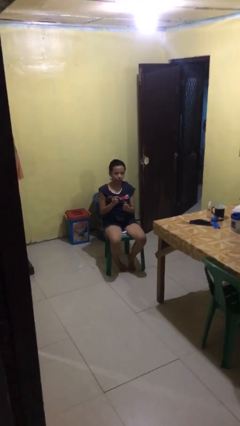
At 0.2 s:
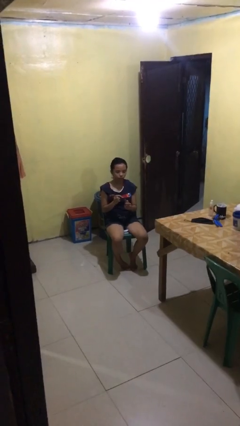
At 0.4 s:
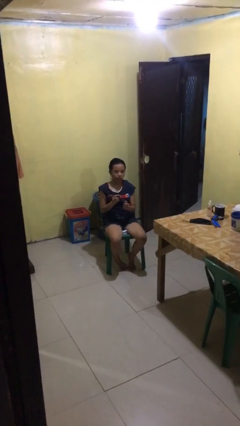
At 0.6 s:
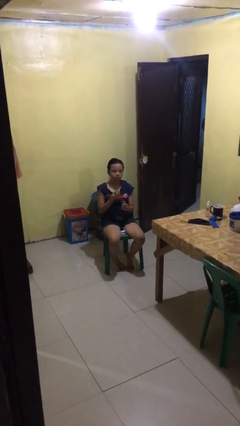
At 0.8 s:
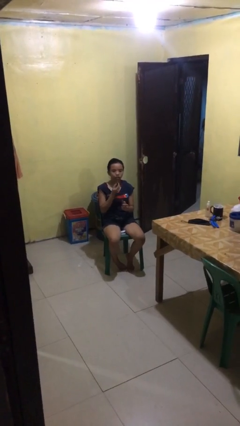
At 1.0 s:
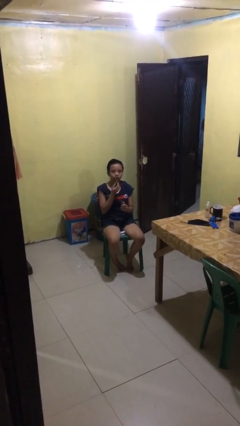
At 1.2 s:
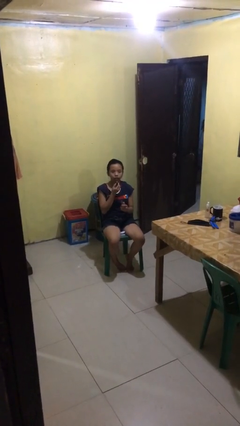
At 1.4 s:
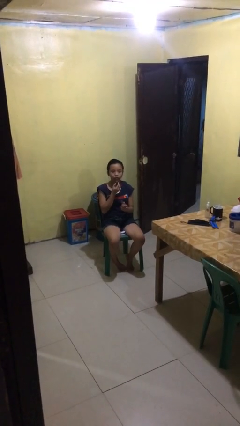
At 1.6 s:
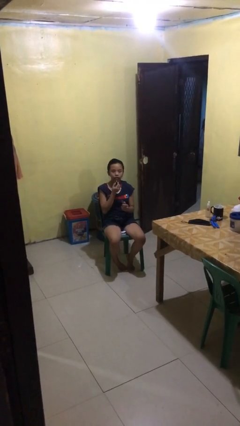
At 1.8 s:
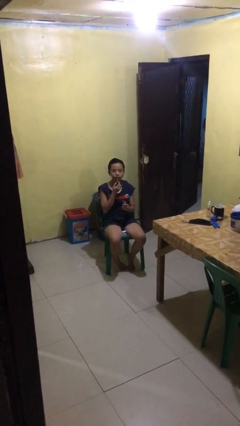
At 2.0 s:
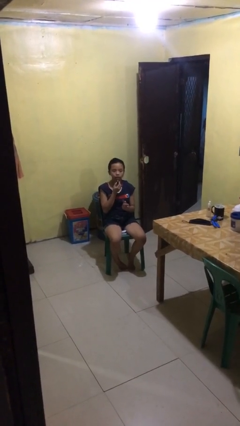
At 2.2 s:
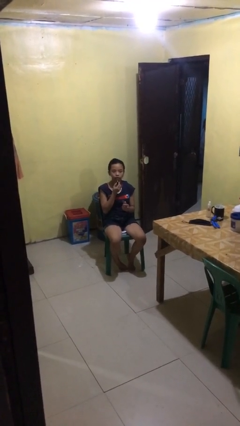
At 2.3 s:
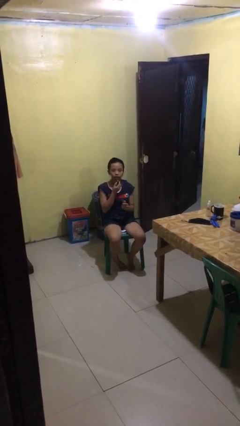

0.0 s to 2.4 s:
person applies lip makeup

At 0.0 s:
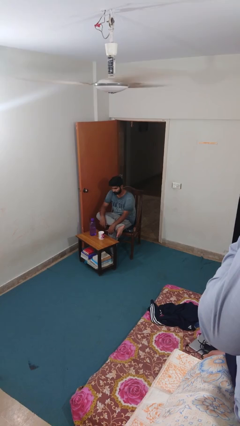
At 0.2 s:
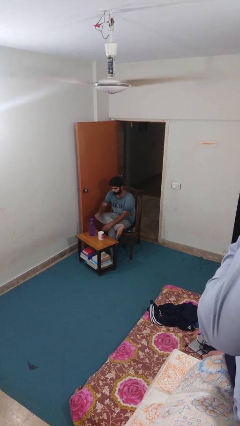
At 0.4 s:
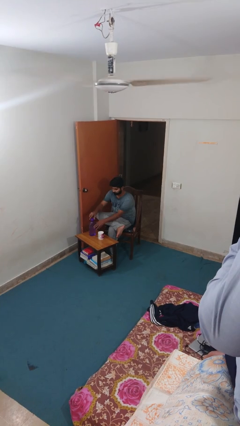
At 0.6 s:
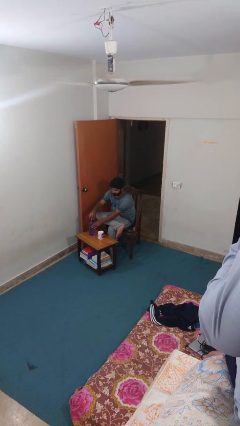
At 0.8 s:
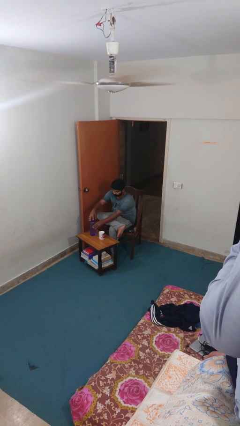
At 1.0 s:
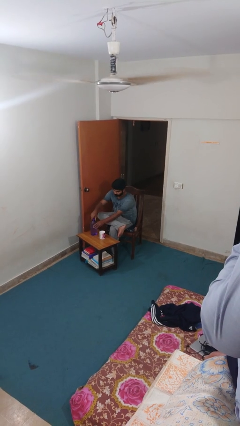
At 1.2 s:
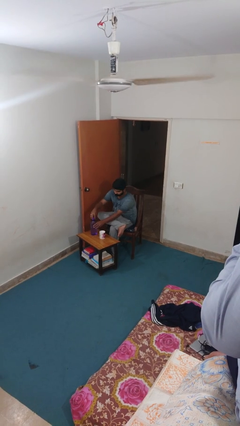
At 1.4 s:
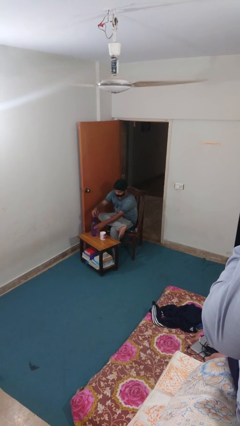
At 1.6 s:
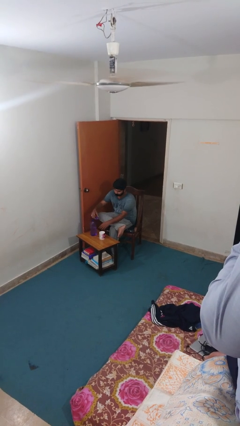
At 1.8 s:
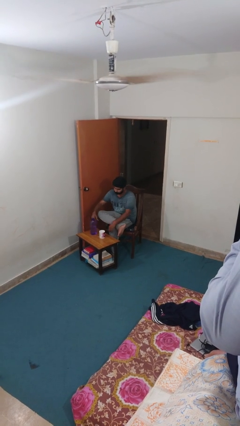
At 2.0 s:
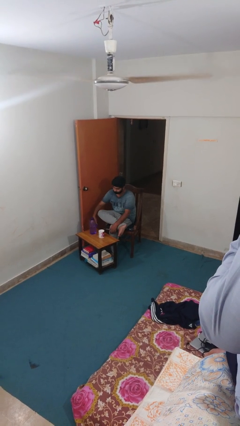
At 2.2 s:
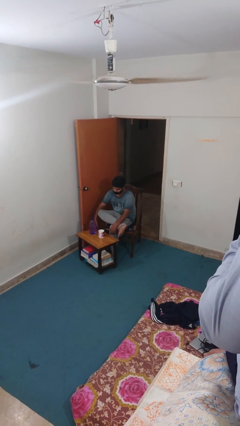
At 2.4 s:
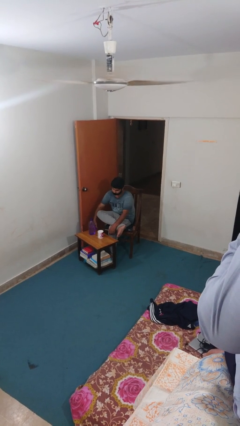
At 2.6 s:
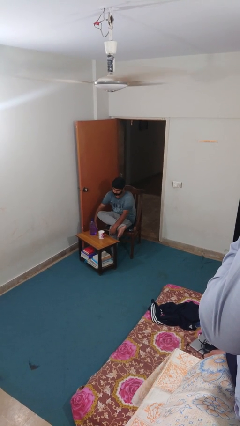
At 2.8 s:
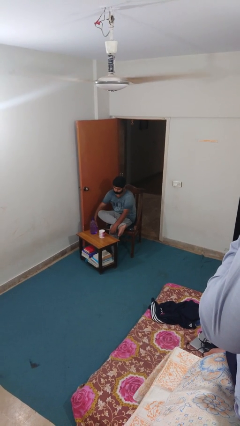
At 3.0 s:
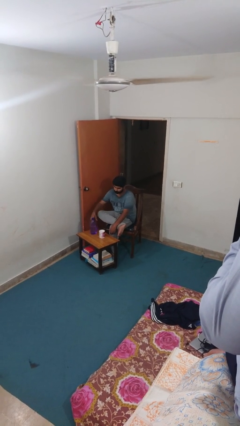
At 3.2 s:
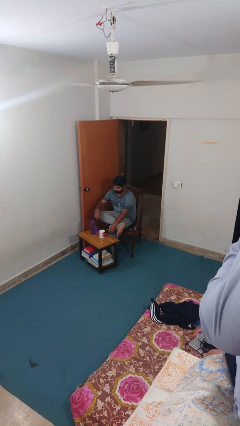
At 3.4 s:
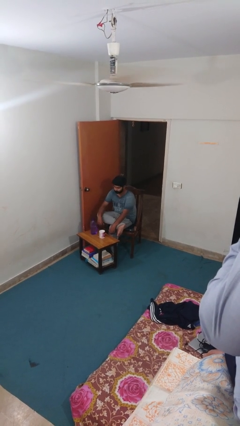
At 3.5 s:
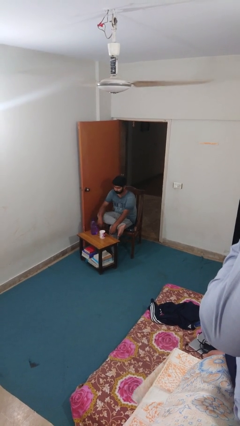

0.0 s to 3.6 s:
person unscrews lid from bottle

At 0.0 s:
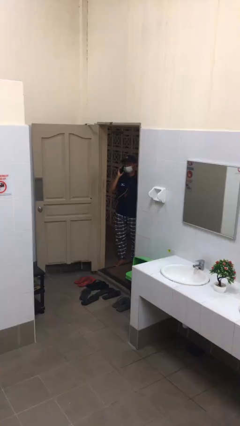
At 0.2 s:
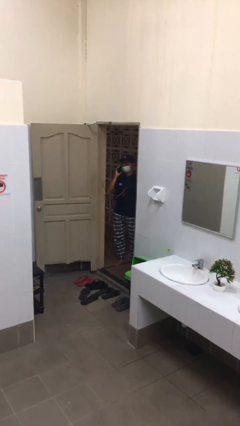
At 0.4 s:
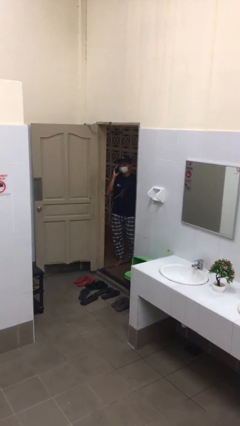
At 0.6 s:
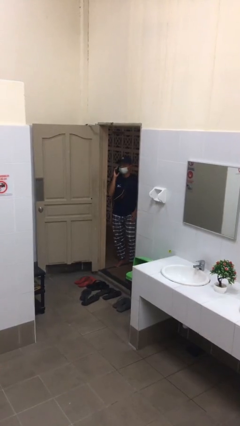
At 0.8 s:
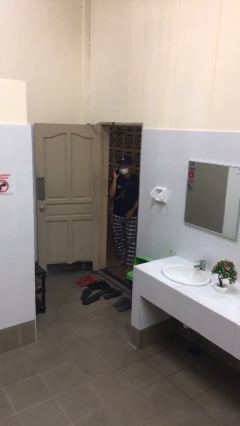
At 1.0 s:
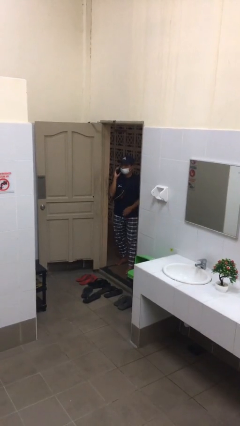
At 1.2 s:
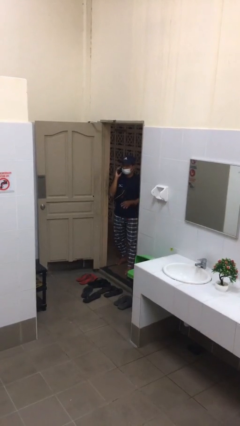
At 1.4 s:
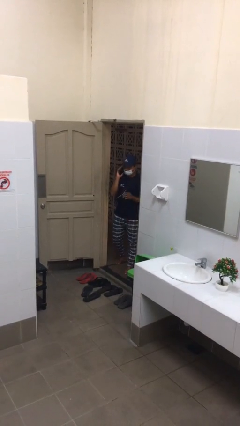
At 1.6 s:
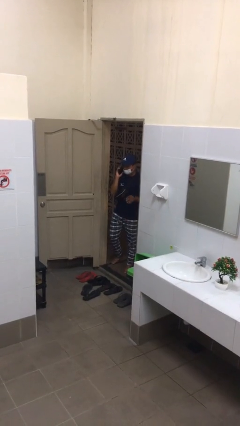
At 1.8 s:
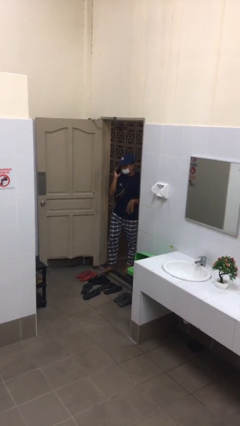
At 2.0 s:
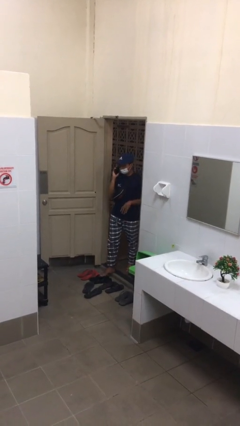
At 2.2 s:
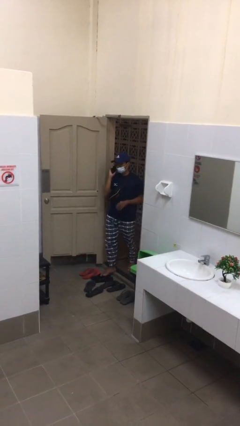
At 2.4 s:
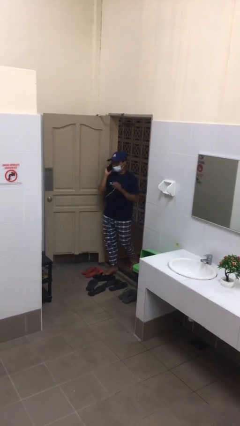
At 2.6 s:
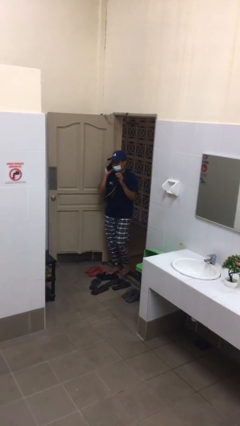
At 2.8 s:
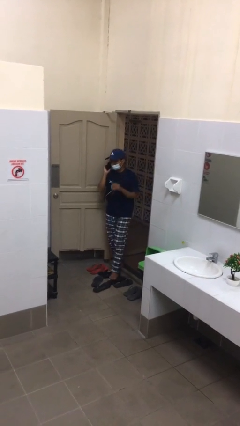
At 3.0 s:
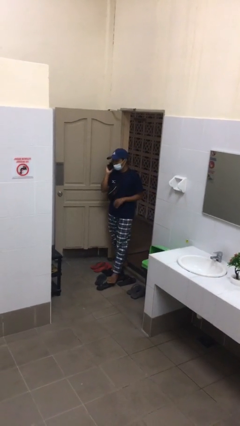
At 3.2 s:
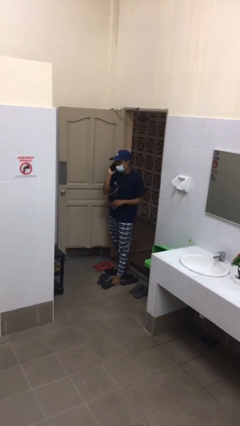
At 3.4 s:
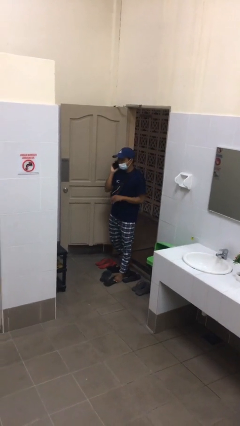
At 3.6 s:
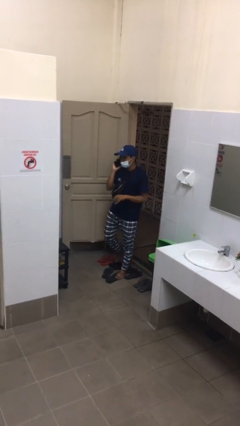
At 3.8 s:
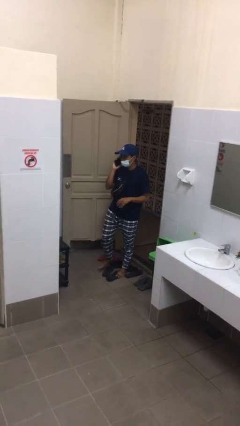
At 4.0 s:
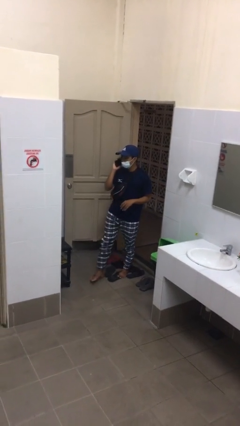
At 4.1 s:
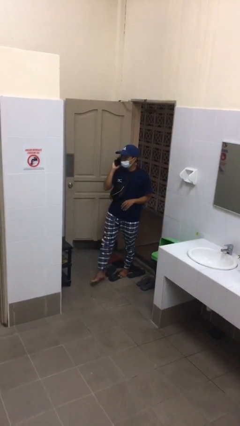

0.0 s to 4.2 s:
person enters scene through structure

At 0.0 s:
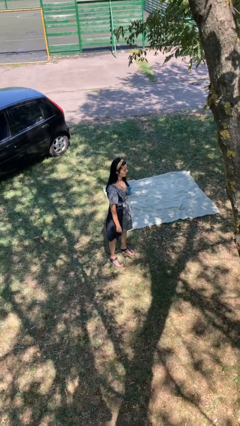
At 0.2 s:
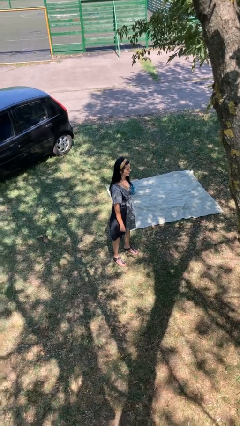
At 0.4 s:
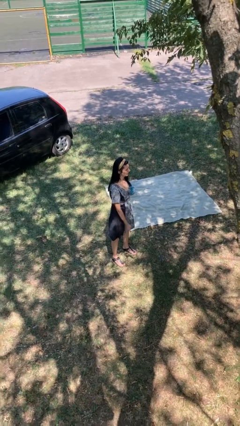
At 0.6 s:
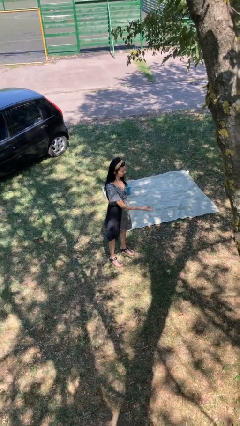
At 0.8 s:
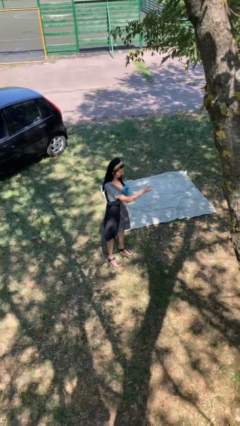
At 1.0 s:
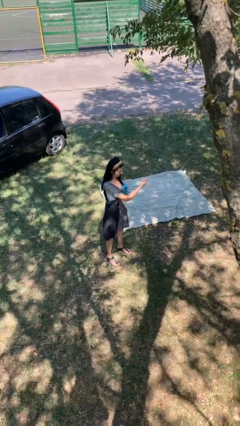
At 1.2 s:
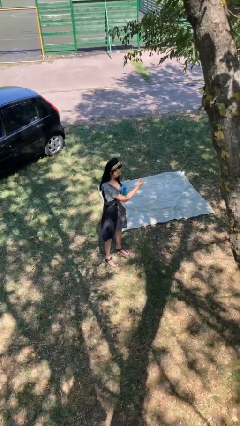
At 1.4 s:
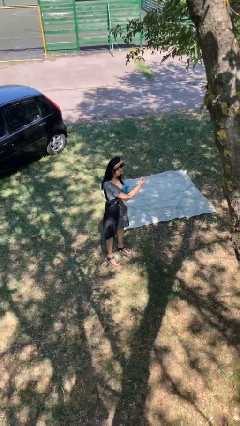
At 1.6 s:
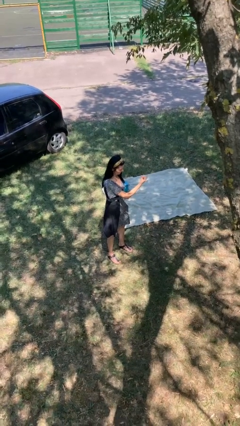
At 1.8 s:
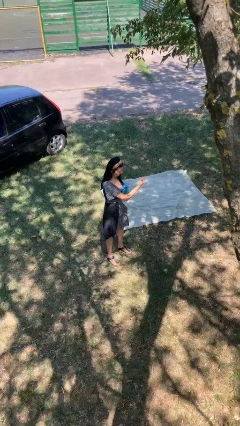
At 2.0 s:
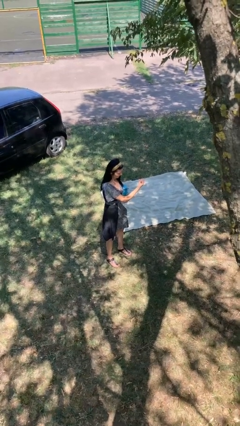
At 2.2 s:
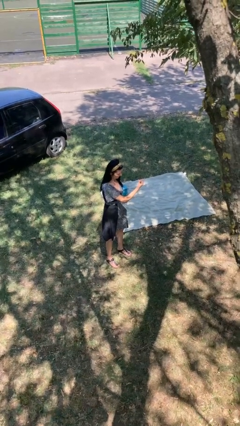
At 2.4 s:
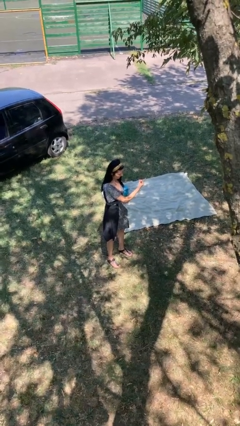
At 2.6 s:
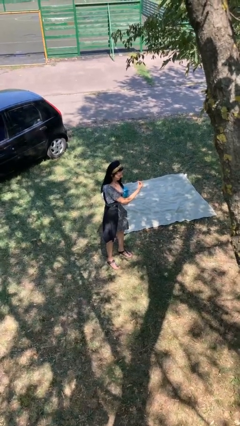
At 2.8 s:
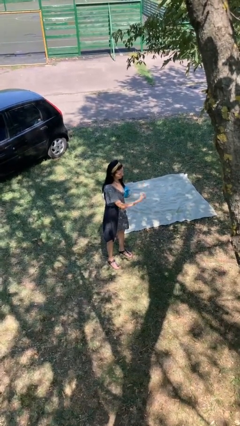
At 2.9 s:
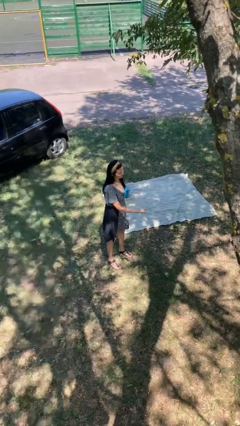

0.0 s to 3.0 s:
person gestures come here

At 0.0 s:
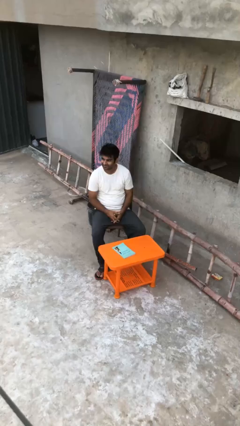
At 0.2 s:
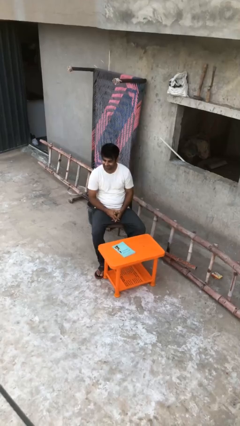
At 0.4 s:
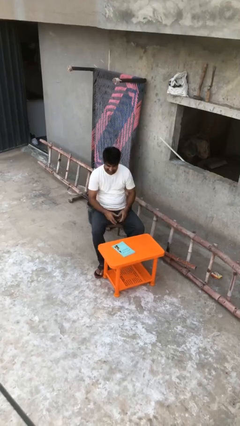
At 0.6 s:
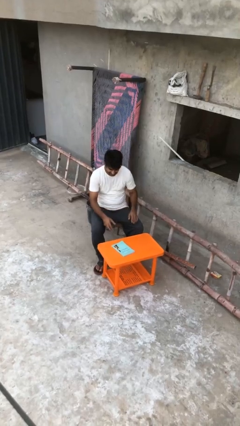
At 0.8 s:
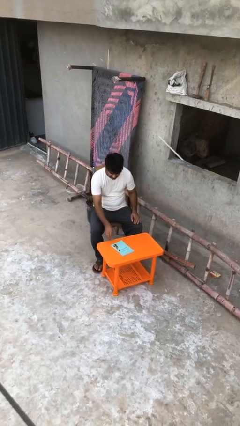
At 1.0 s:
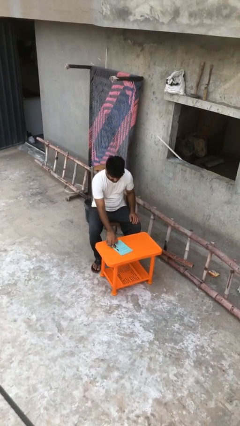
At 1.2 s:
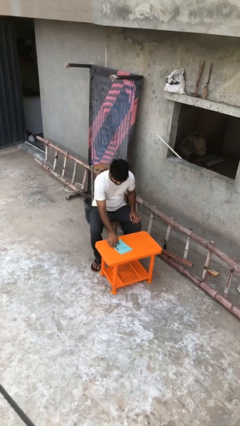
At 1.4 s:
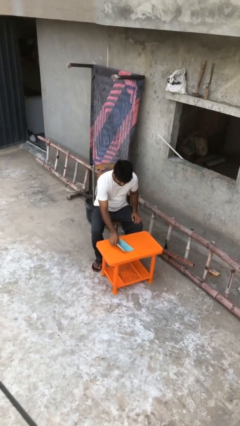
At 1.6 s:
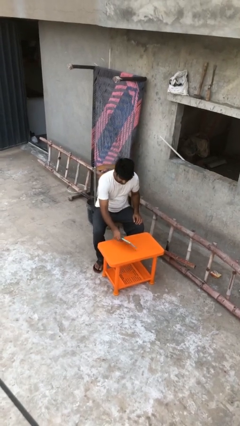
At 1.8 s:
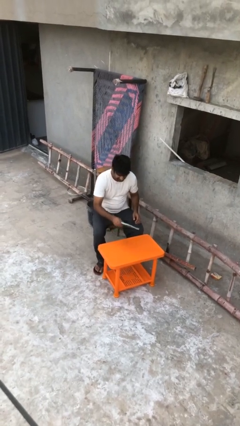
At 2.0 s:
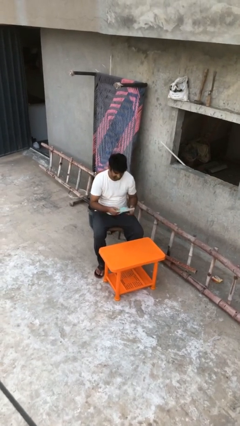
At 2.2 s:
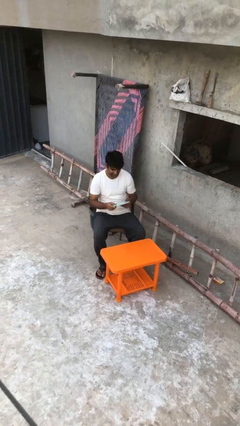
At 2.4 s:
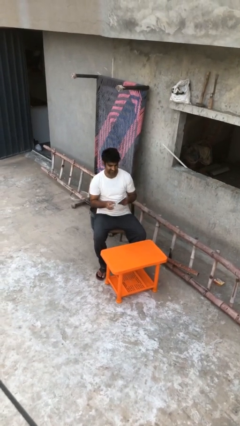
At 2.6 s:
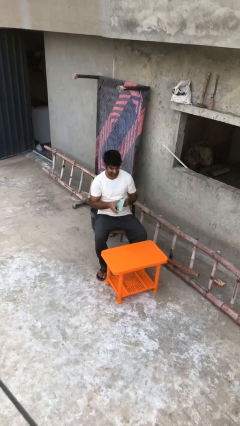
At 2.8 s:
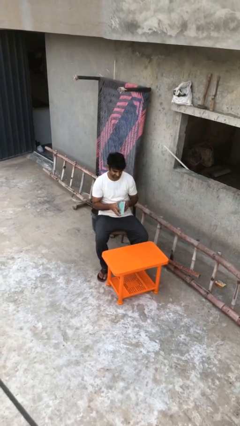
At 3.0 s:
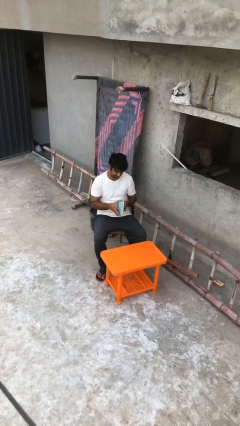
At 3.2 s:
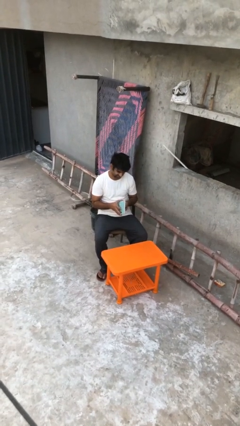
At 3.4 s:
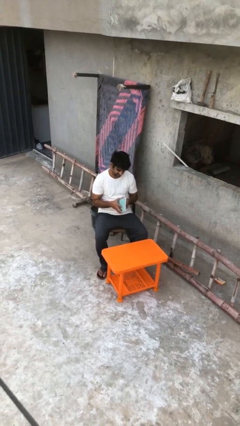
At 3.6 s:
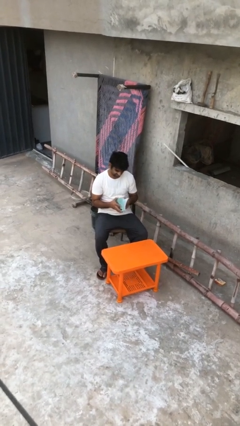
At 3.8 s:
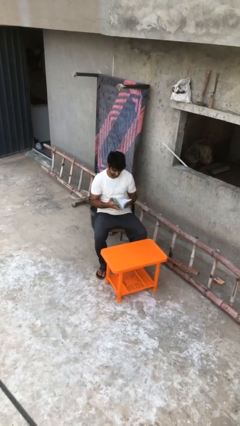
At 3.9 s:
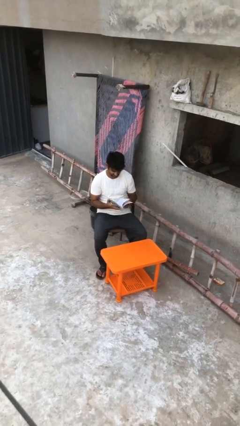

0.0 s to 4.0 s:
person picks up object from table
